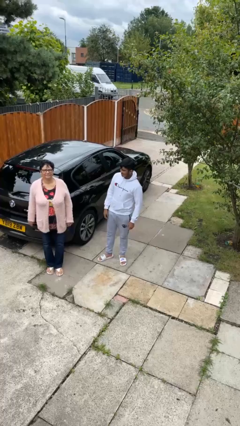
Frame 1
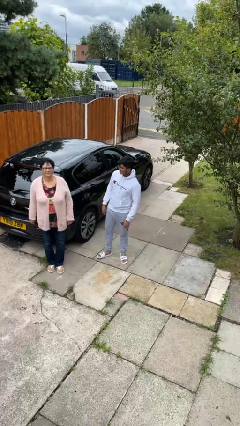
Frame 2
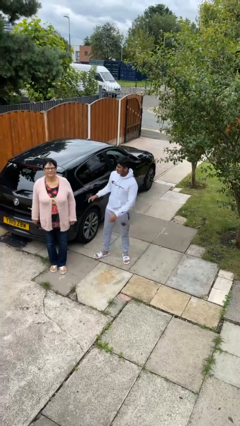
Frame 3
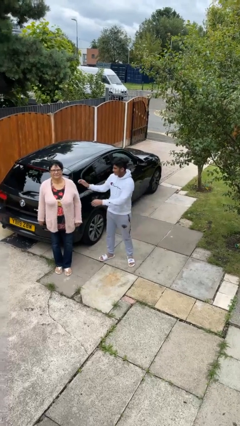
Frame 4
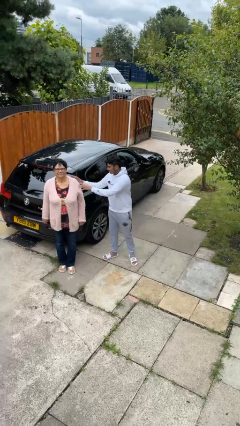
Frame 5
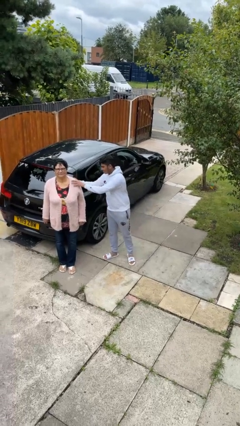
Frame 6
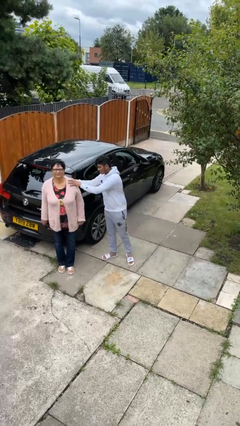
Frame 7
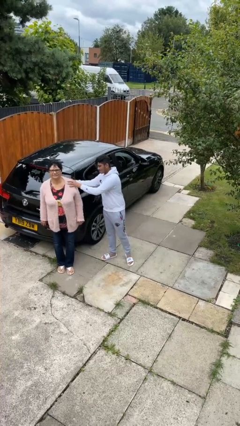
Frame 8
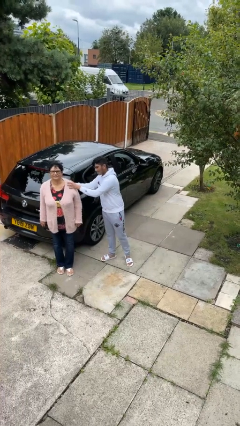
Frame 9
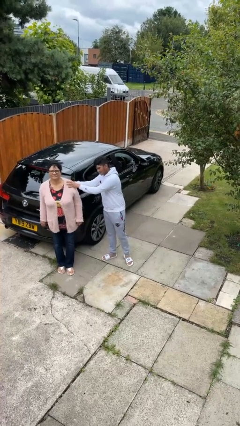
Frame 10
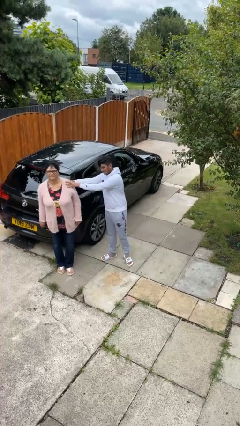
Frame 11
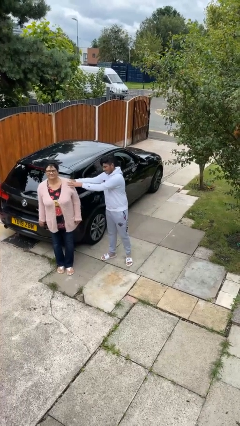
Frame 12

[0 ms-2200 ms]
person shoves person

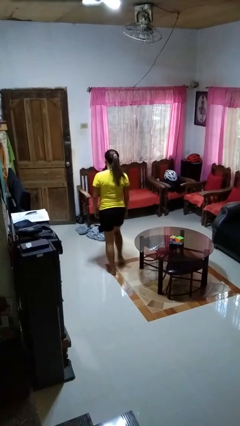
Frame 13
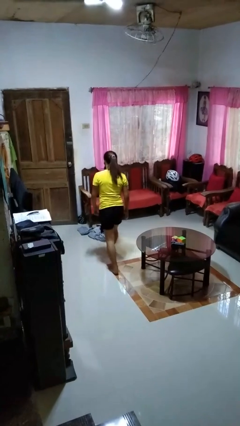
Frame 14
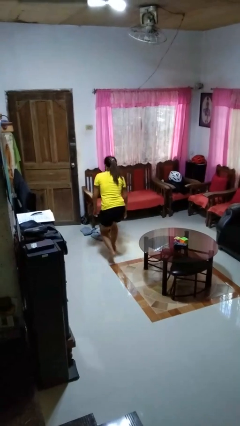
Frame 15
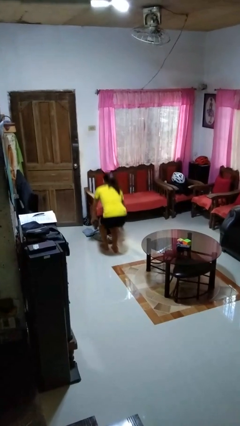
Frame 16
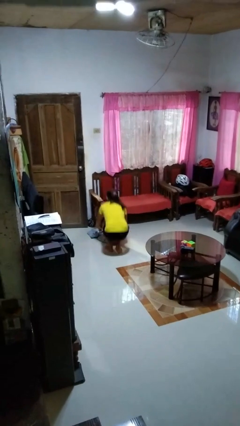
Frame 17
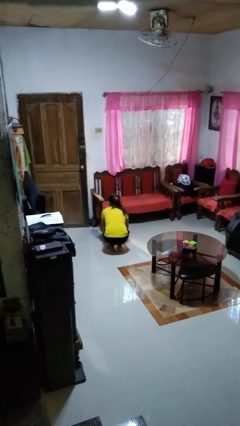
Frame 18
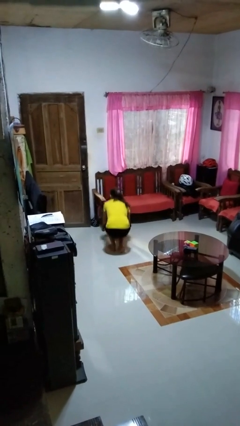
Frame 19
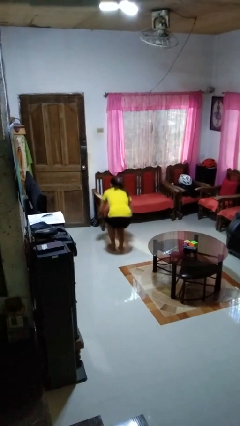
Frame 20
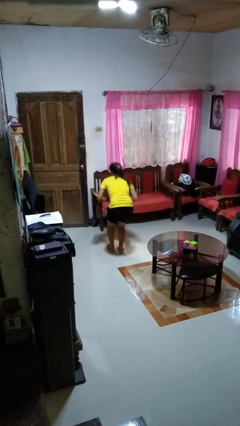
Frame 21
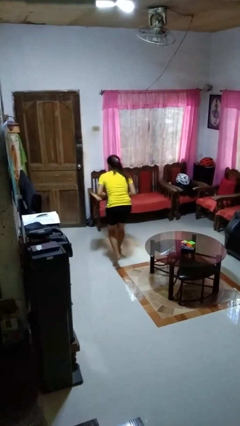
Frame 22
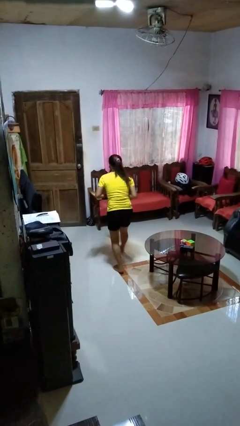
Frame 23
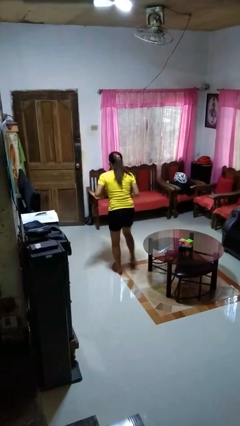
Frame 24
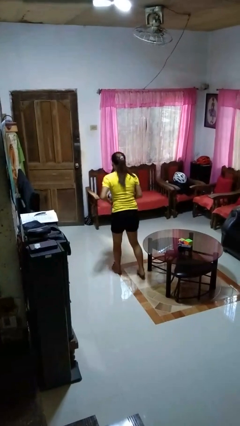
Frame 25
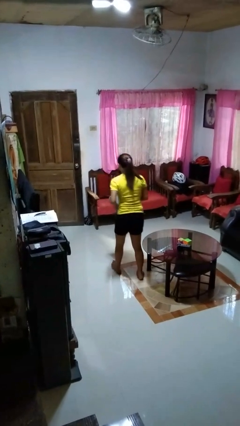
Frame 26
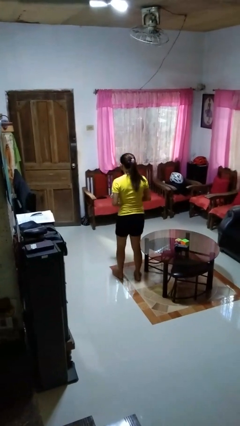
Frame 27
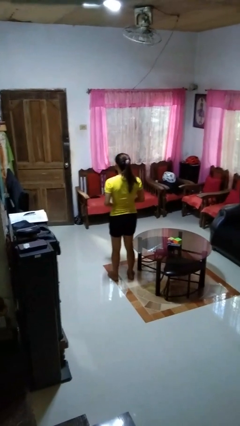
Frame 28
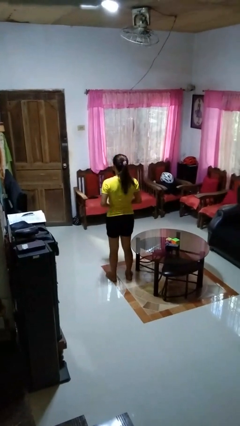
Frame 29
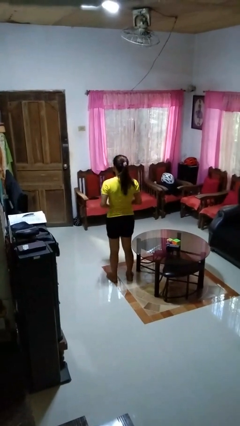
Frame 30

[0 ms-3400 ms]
person picks up object from floor

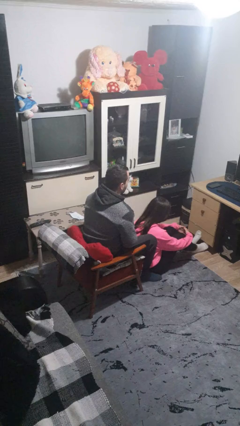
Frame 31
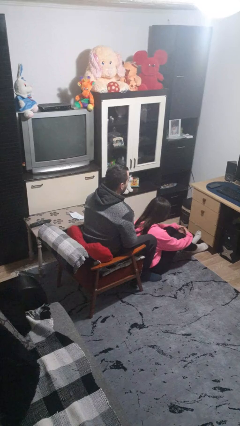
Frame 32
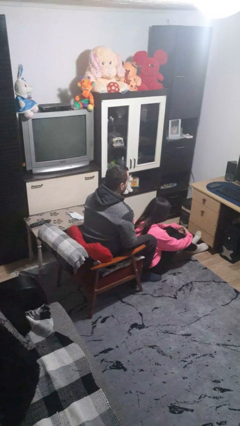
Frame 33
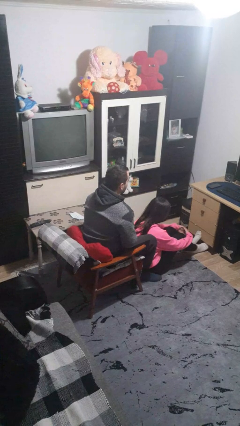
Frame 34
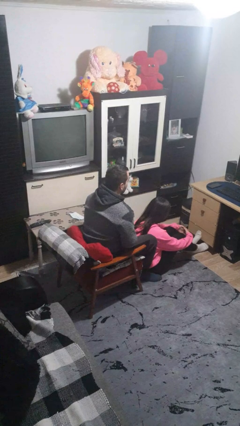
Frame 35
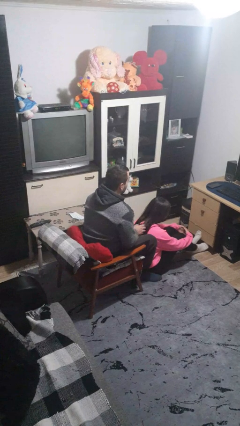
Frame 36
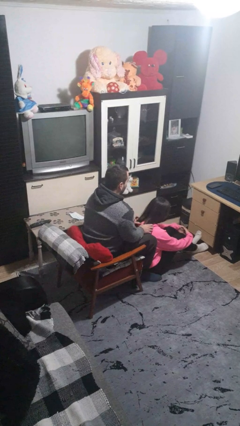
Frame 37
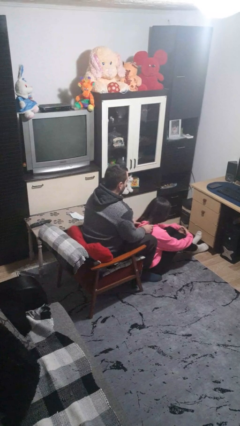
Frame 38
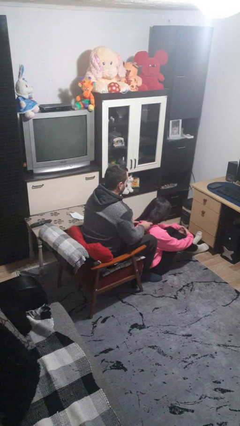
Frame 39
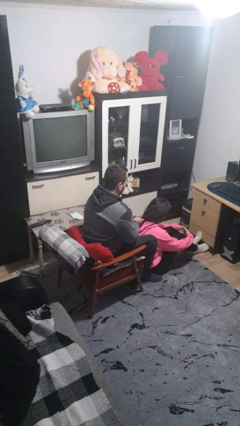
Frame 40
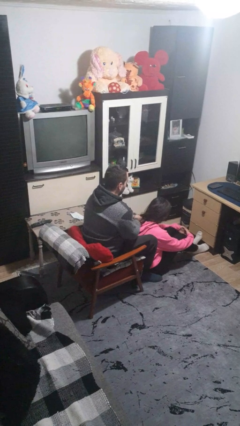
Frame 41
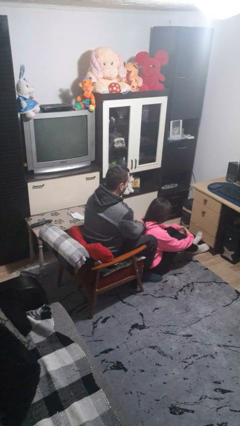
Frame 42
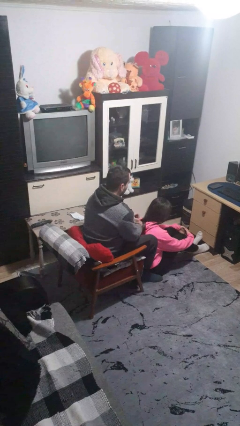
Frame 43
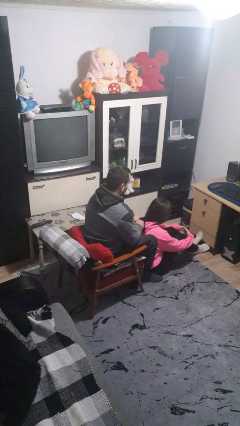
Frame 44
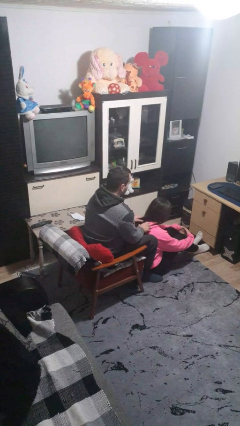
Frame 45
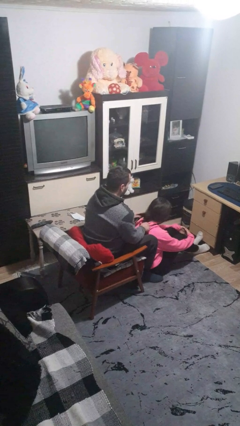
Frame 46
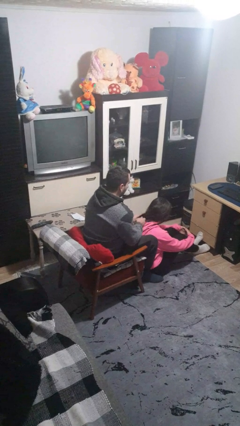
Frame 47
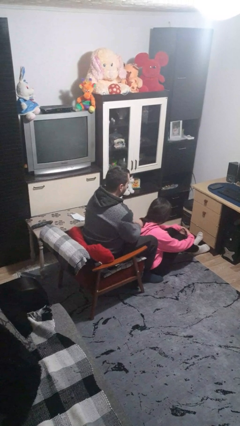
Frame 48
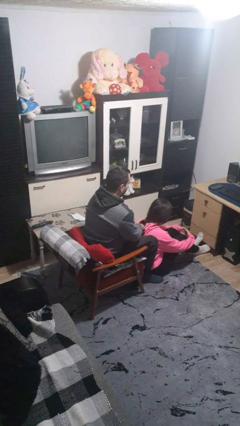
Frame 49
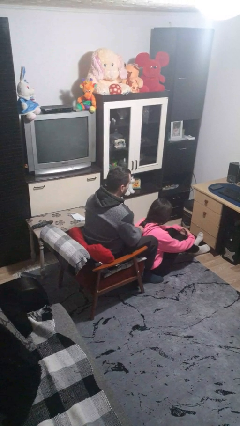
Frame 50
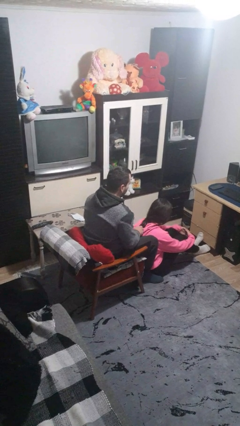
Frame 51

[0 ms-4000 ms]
person braids hair of person

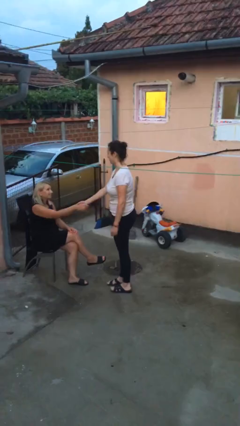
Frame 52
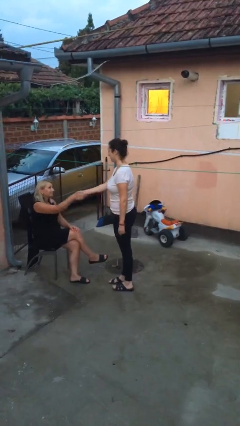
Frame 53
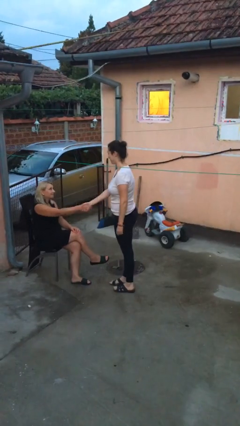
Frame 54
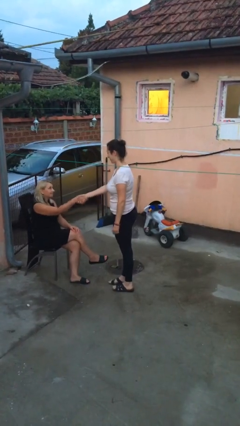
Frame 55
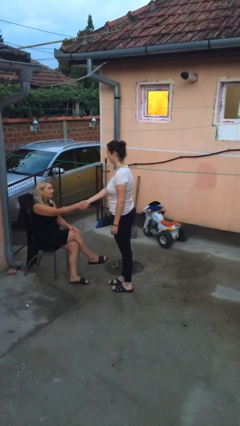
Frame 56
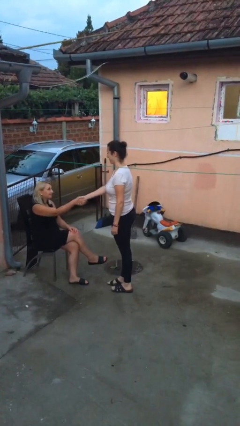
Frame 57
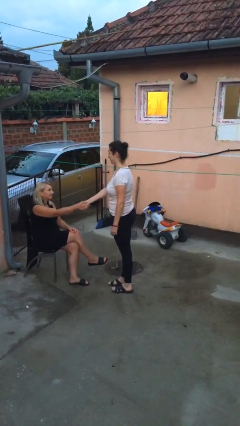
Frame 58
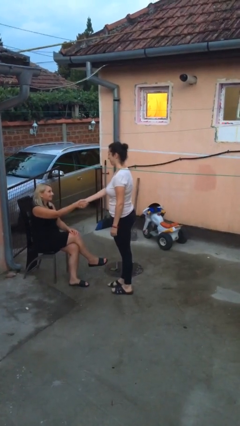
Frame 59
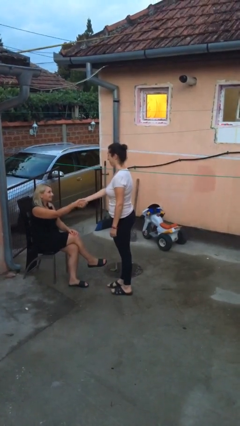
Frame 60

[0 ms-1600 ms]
person shakes hand

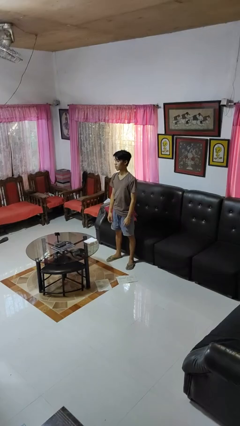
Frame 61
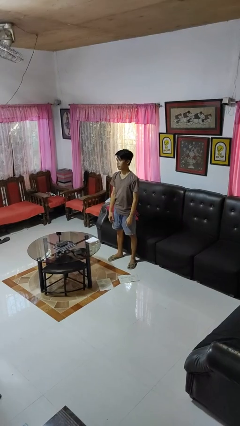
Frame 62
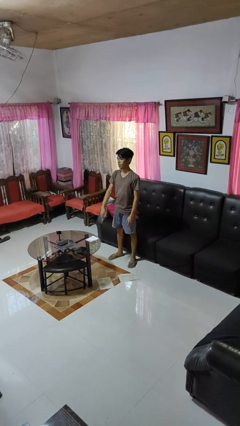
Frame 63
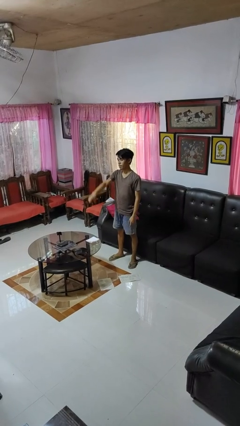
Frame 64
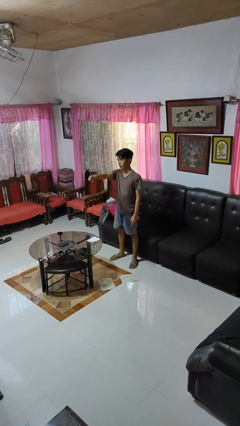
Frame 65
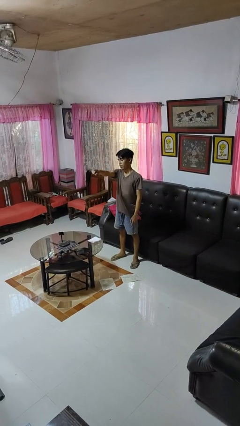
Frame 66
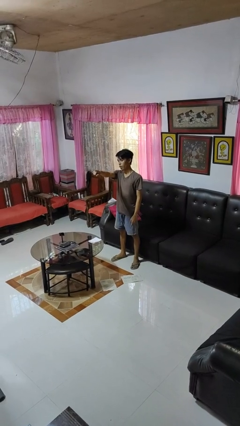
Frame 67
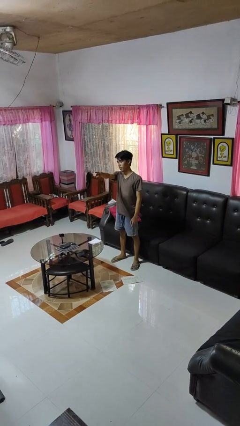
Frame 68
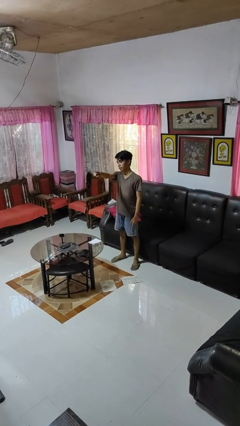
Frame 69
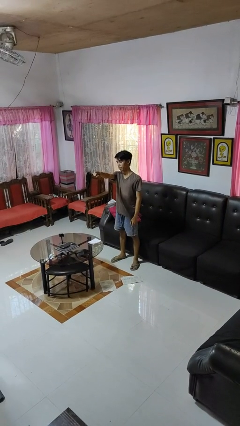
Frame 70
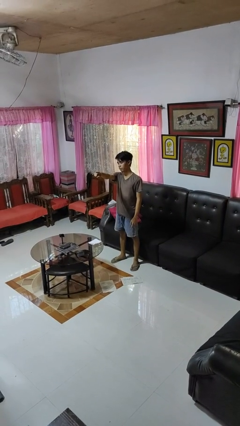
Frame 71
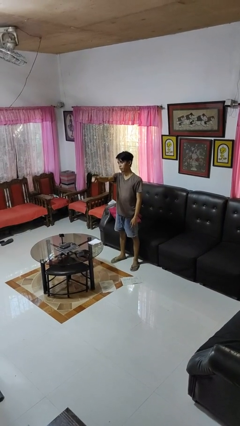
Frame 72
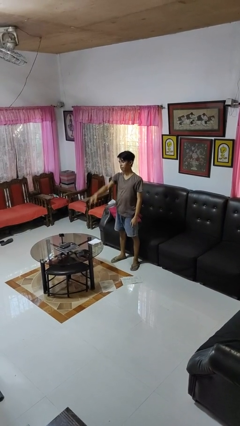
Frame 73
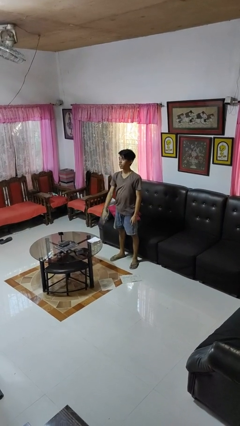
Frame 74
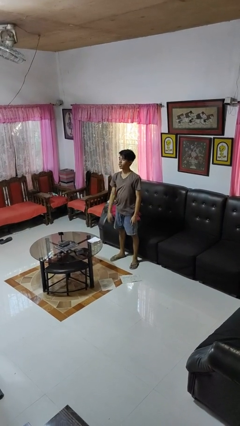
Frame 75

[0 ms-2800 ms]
person points at person

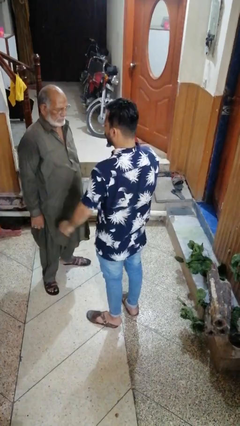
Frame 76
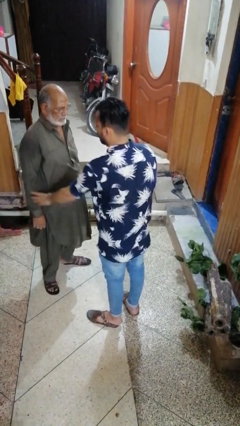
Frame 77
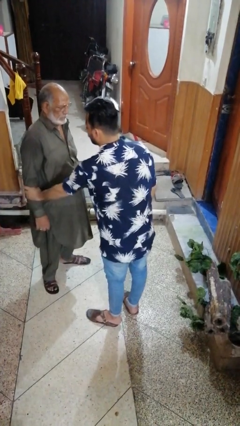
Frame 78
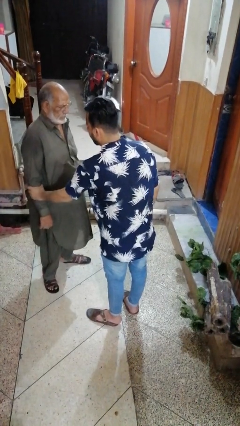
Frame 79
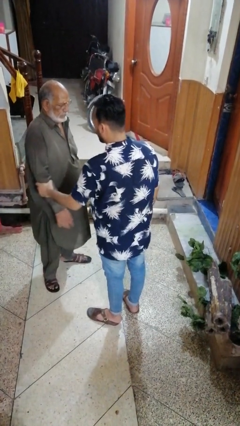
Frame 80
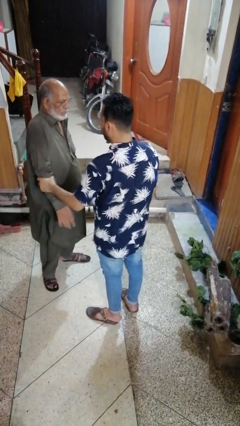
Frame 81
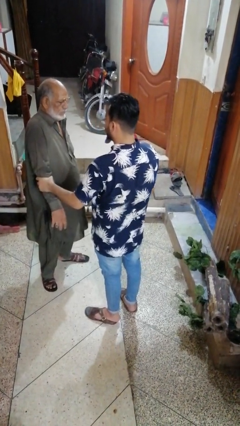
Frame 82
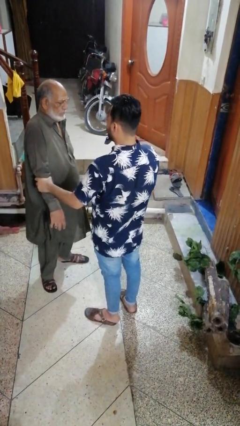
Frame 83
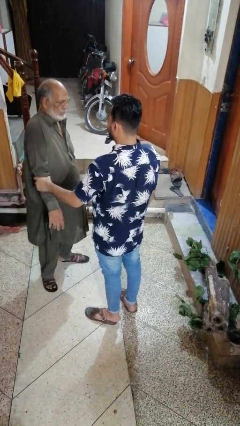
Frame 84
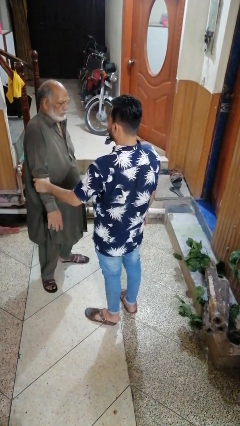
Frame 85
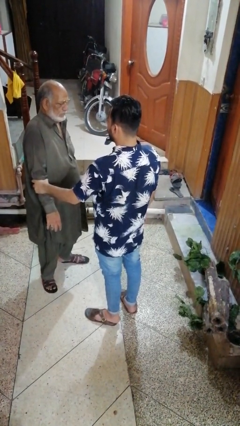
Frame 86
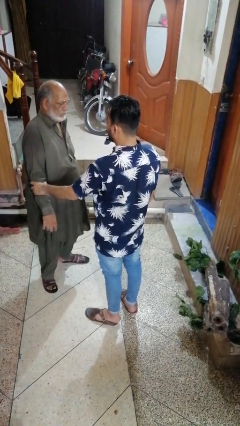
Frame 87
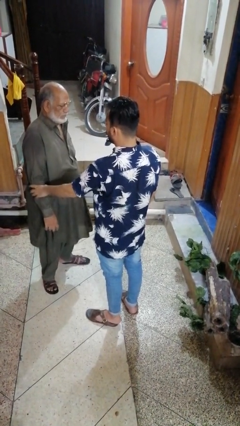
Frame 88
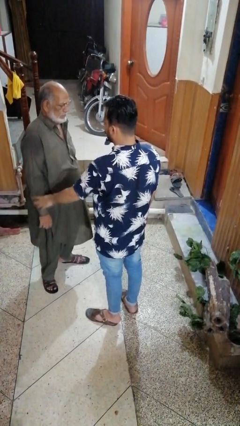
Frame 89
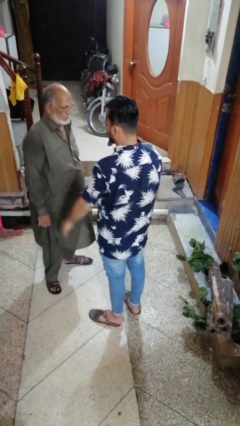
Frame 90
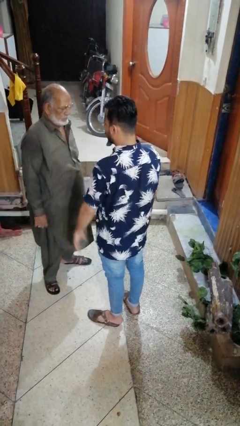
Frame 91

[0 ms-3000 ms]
person grabs person by forearm

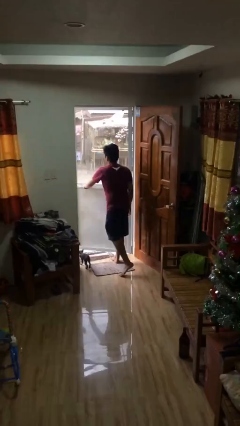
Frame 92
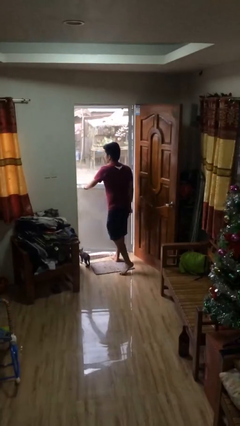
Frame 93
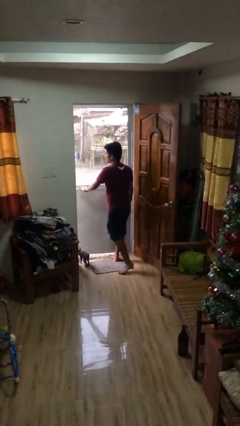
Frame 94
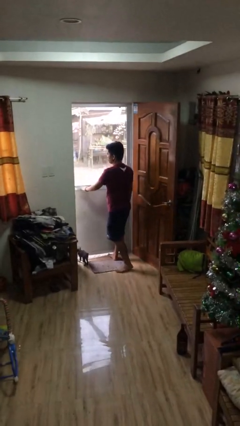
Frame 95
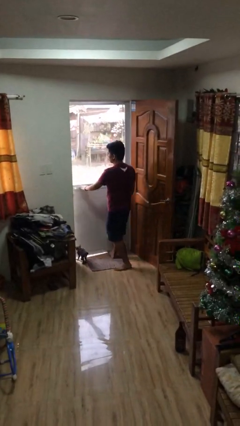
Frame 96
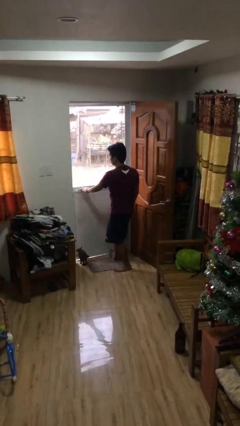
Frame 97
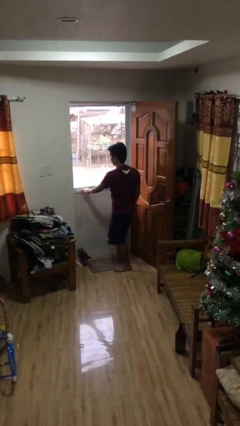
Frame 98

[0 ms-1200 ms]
person closes facility door
